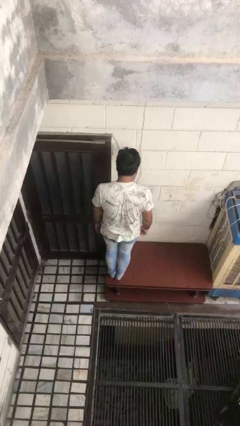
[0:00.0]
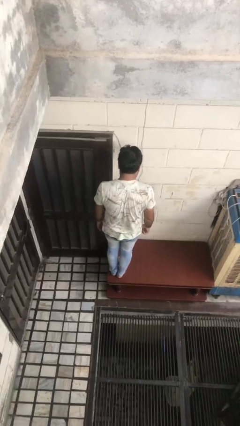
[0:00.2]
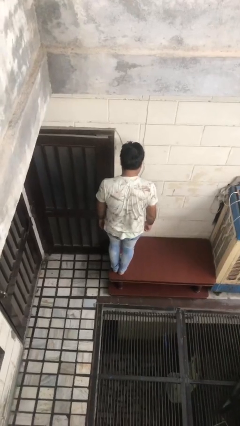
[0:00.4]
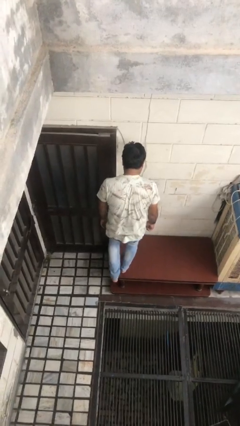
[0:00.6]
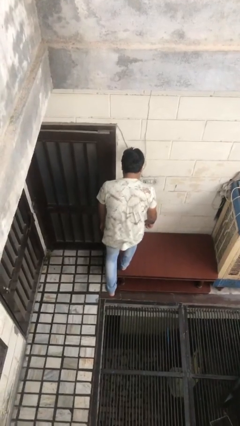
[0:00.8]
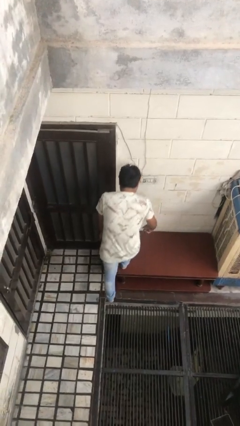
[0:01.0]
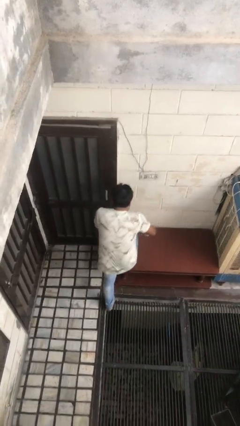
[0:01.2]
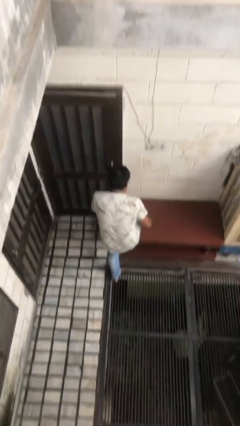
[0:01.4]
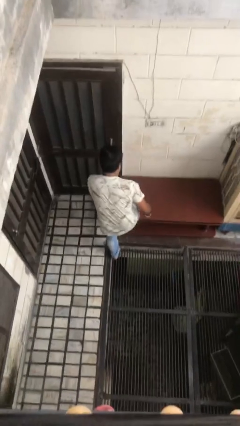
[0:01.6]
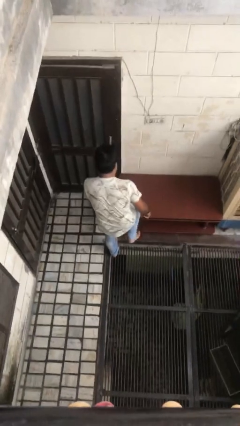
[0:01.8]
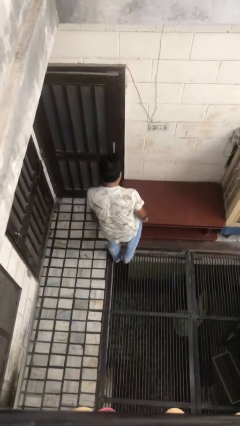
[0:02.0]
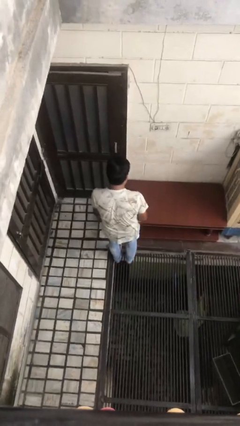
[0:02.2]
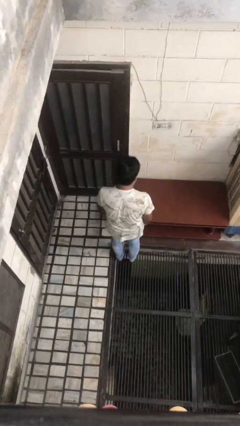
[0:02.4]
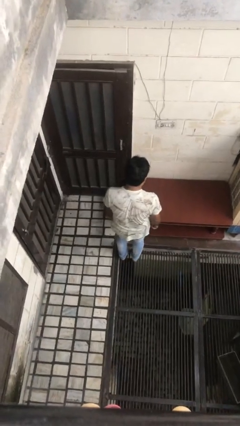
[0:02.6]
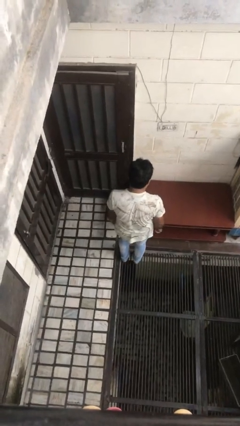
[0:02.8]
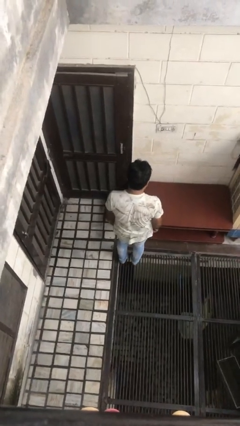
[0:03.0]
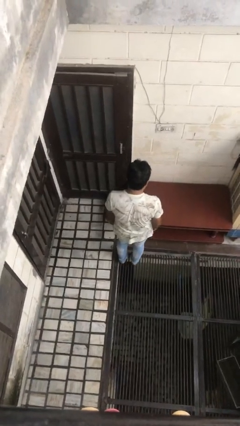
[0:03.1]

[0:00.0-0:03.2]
person climbs off table

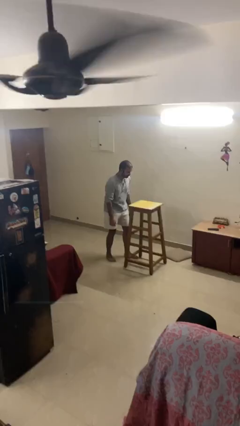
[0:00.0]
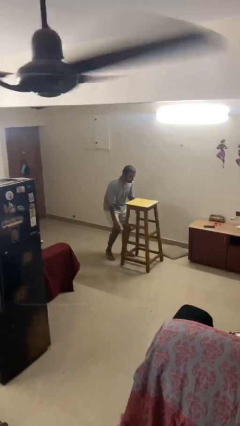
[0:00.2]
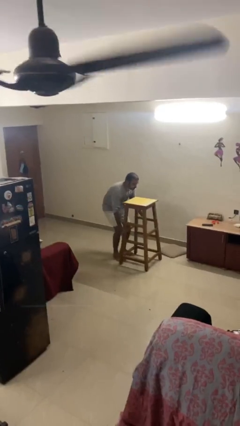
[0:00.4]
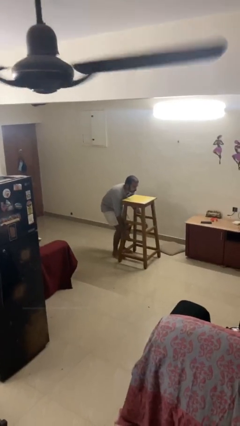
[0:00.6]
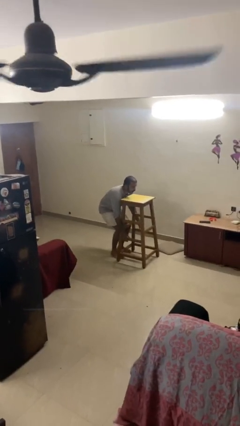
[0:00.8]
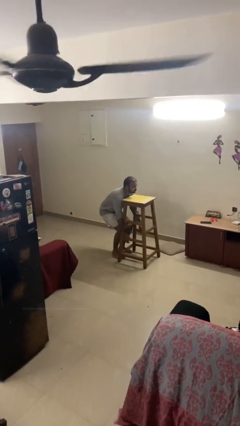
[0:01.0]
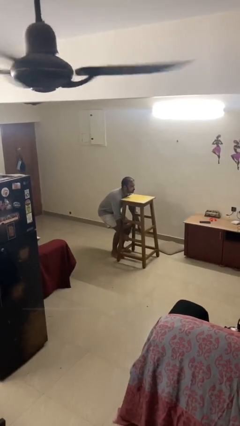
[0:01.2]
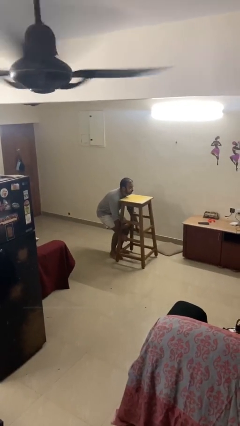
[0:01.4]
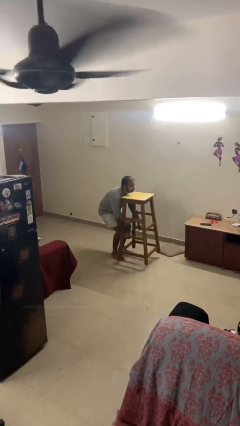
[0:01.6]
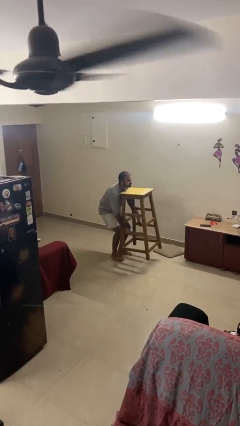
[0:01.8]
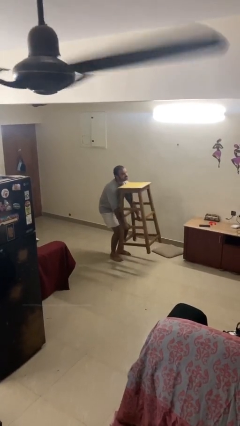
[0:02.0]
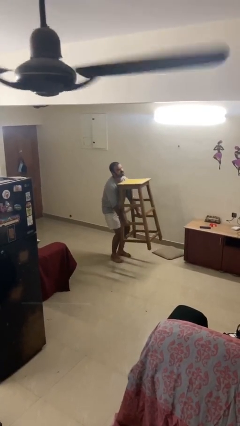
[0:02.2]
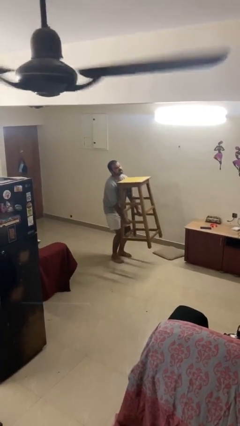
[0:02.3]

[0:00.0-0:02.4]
person picks up object from floor

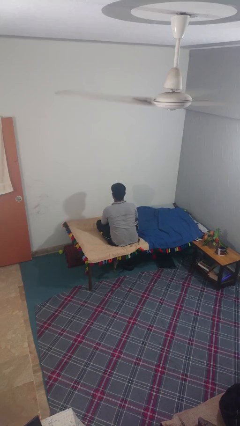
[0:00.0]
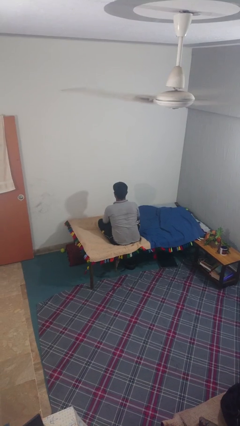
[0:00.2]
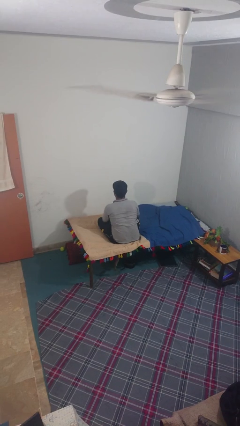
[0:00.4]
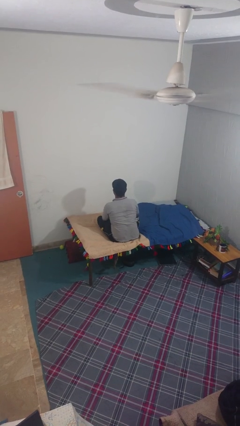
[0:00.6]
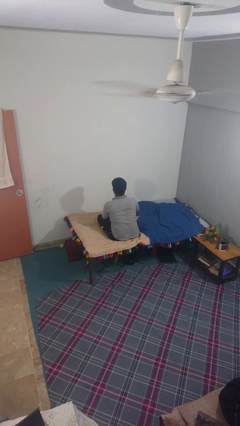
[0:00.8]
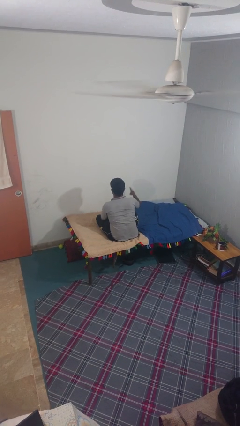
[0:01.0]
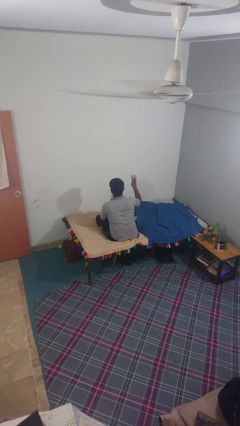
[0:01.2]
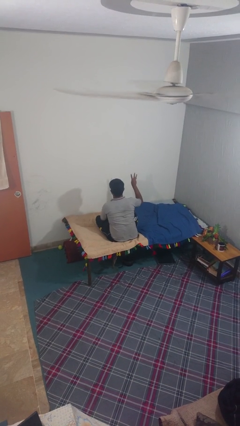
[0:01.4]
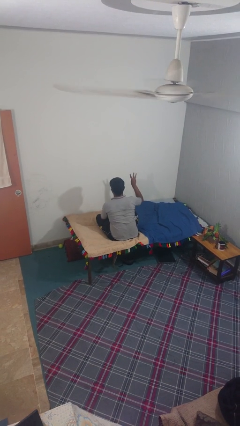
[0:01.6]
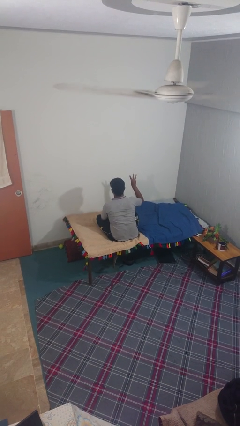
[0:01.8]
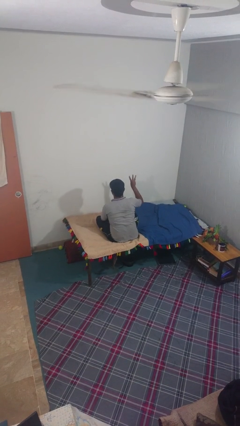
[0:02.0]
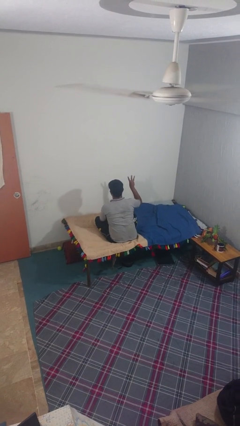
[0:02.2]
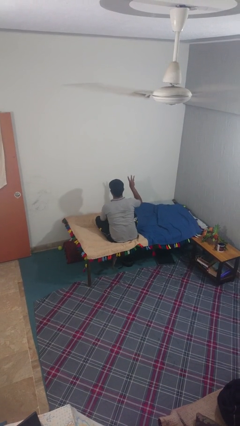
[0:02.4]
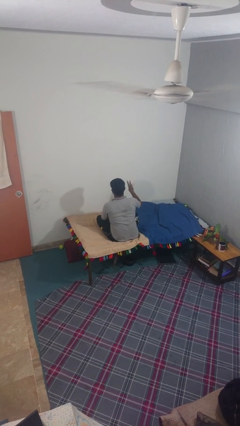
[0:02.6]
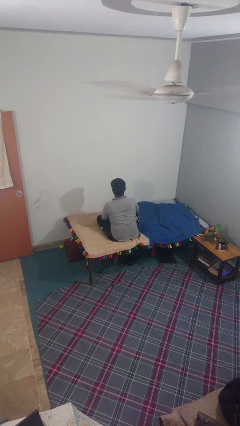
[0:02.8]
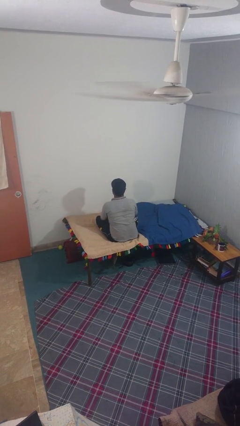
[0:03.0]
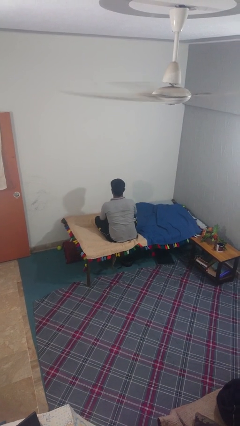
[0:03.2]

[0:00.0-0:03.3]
person gestures number three

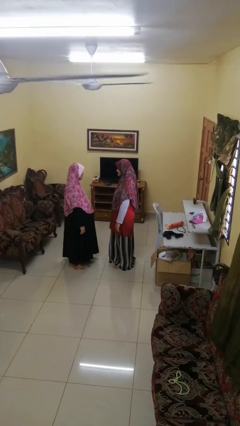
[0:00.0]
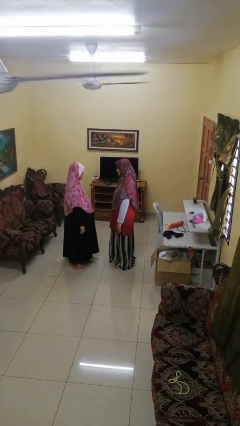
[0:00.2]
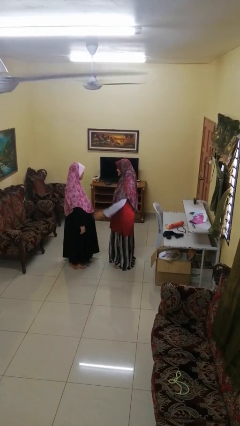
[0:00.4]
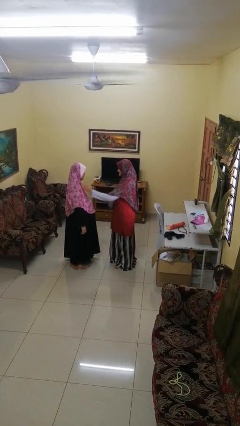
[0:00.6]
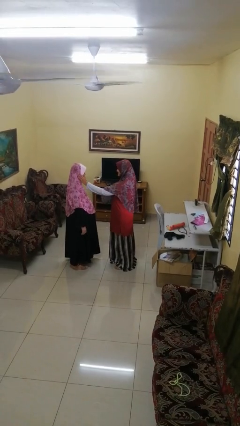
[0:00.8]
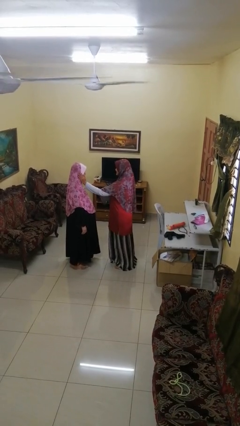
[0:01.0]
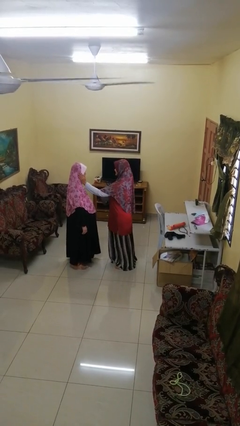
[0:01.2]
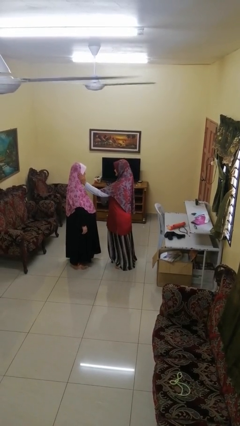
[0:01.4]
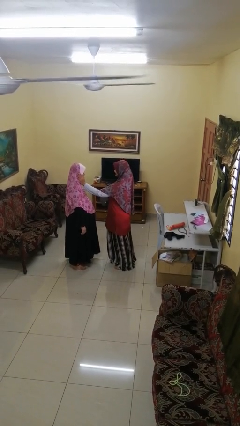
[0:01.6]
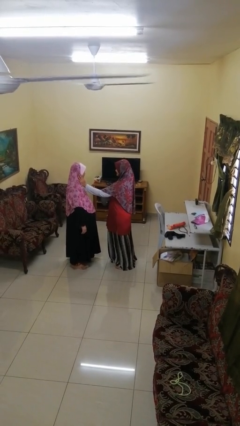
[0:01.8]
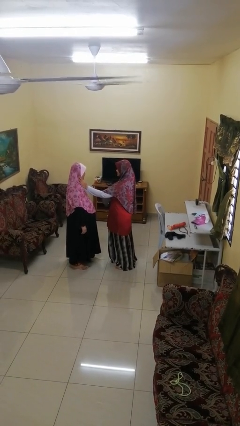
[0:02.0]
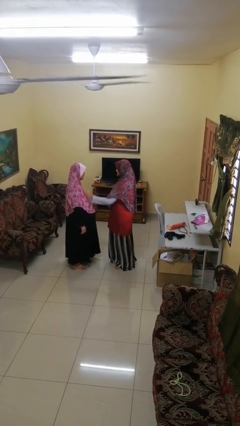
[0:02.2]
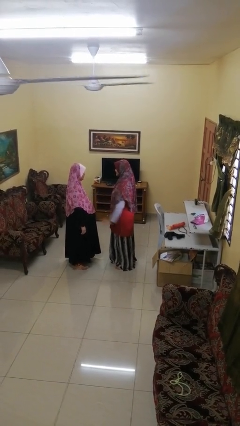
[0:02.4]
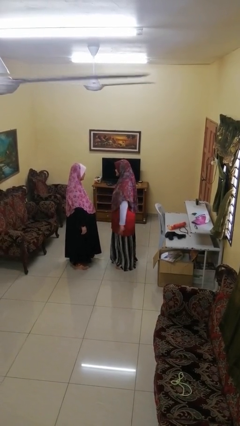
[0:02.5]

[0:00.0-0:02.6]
person touches face of person

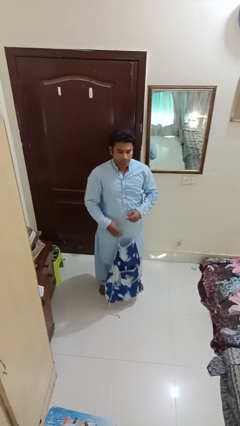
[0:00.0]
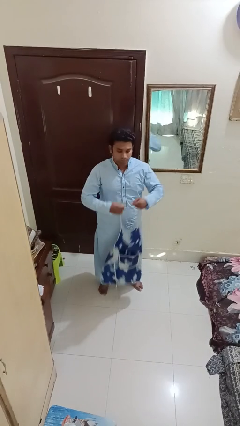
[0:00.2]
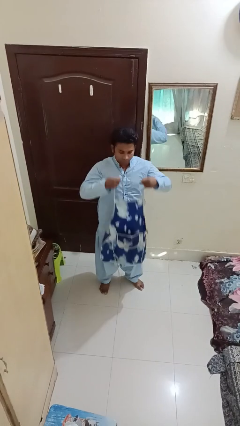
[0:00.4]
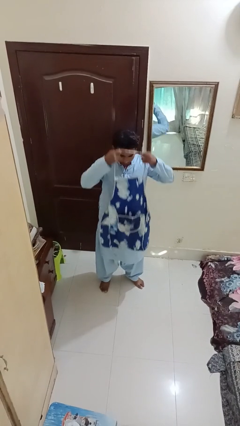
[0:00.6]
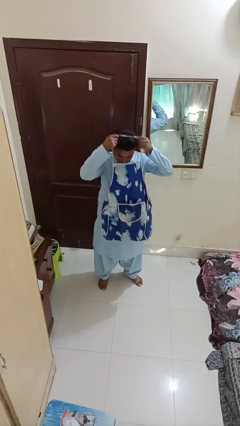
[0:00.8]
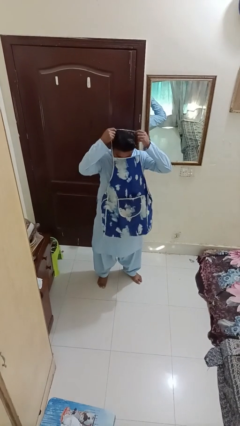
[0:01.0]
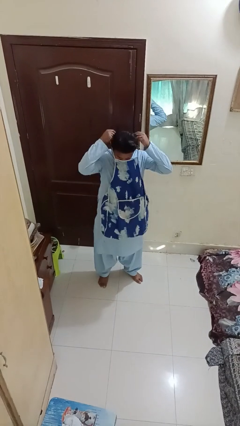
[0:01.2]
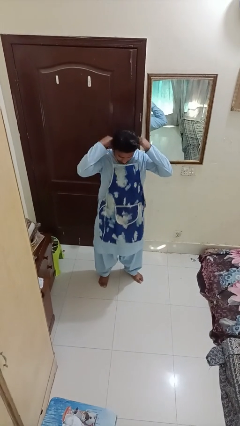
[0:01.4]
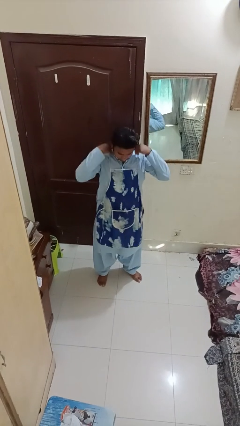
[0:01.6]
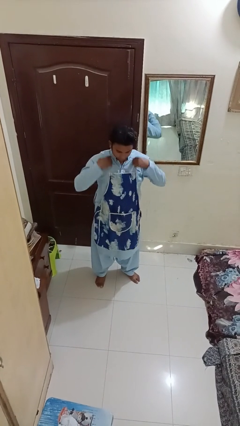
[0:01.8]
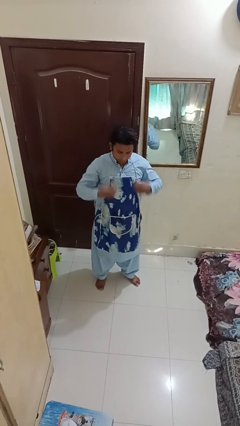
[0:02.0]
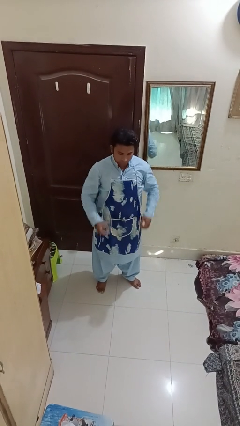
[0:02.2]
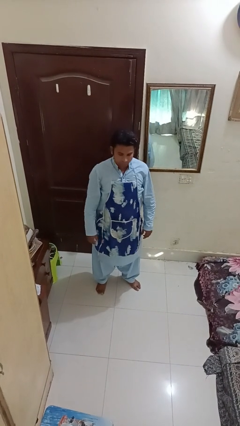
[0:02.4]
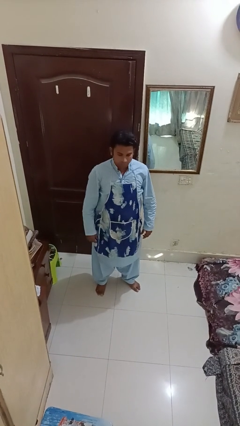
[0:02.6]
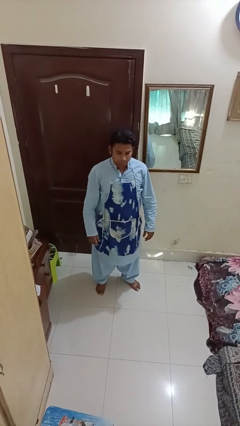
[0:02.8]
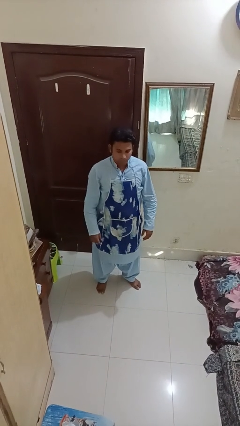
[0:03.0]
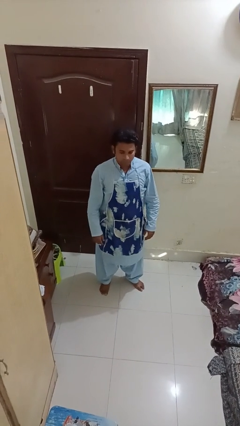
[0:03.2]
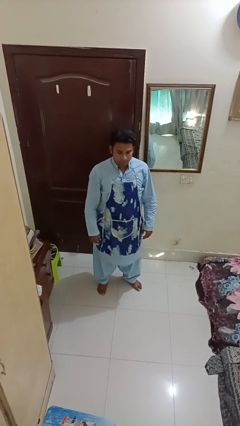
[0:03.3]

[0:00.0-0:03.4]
person puts on apron

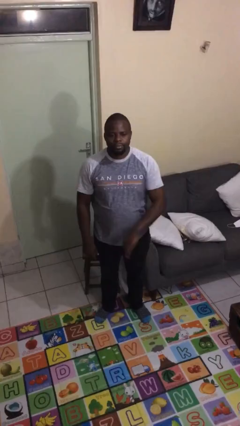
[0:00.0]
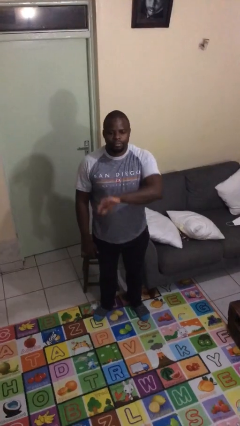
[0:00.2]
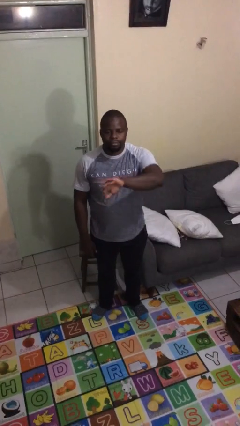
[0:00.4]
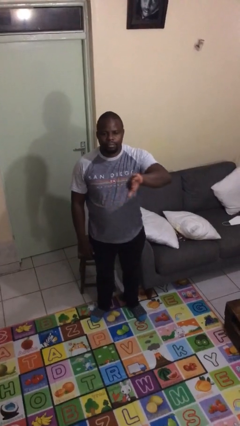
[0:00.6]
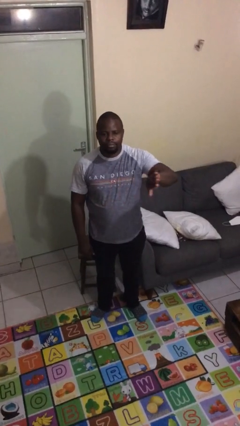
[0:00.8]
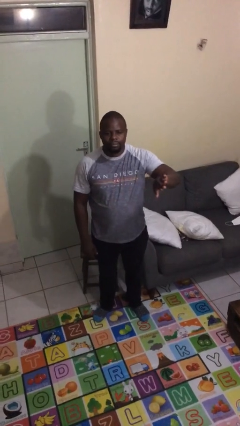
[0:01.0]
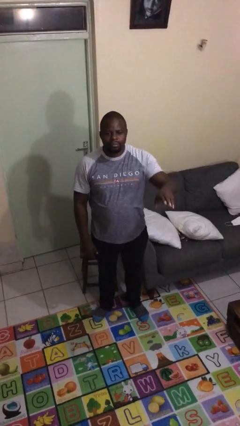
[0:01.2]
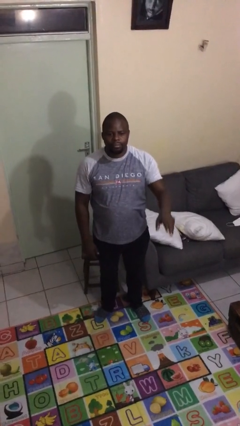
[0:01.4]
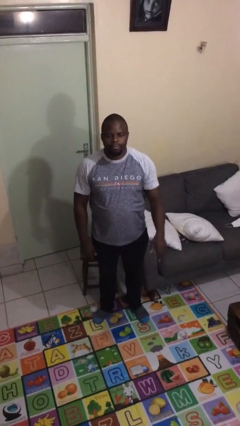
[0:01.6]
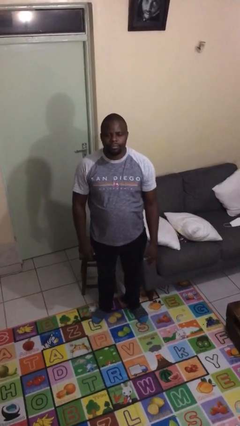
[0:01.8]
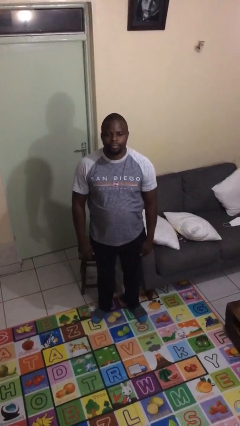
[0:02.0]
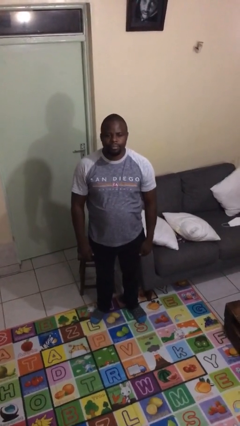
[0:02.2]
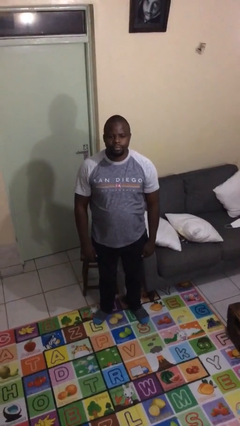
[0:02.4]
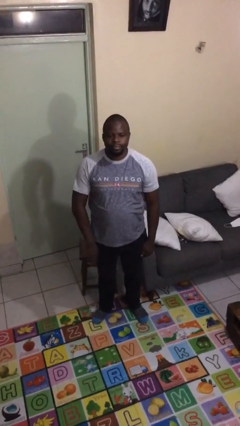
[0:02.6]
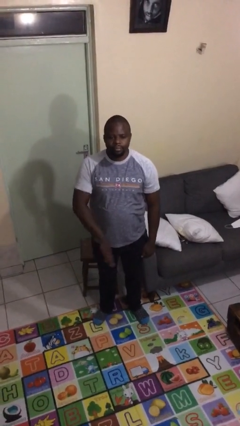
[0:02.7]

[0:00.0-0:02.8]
person gestures swipe left
